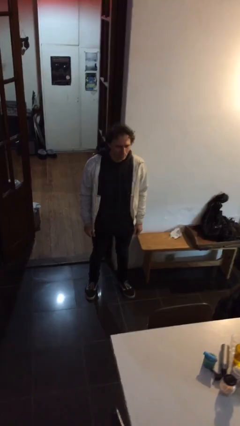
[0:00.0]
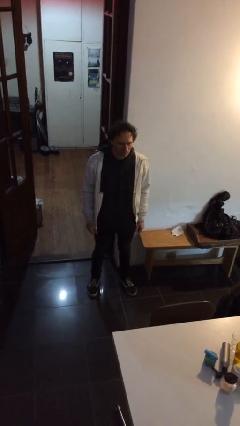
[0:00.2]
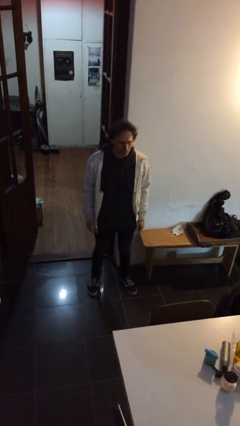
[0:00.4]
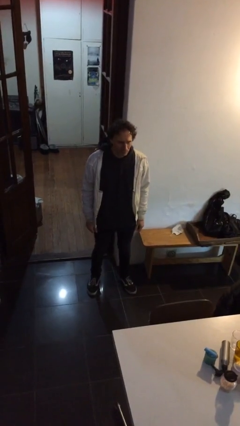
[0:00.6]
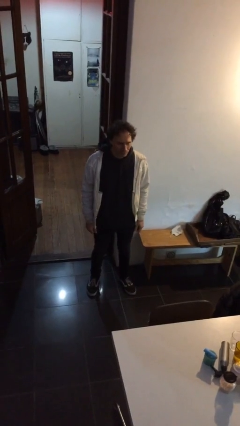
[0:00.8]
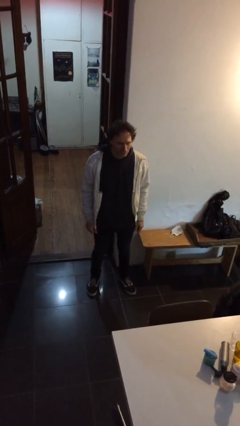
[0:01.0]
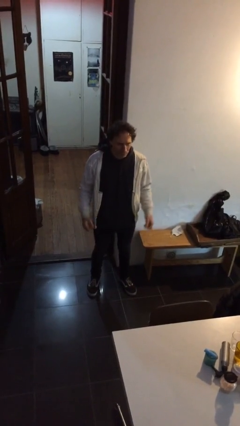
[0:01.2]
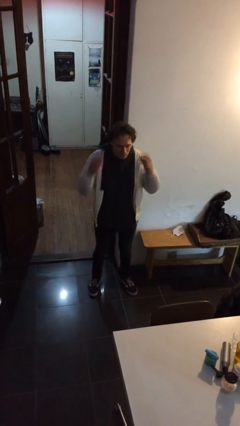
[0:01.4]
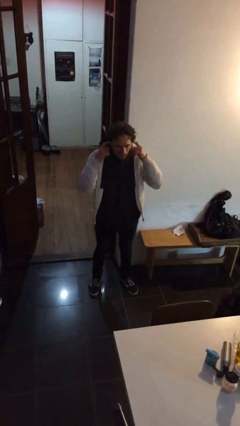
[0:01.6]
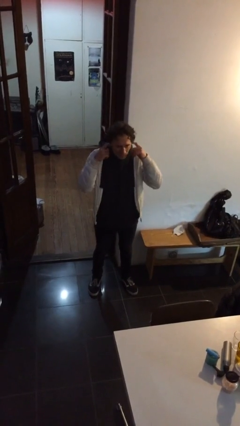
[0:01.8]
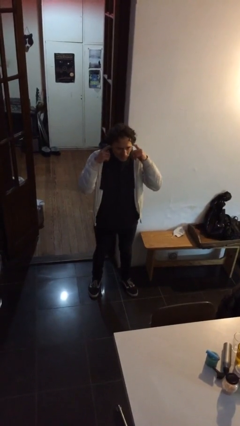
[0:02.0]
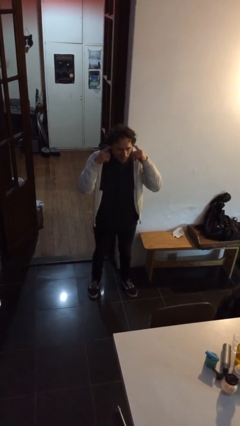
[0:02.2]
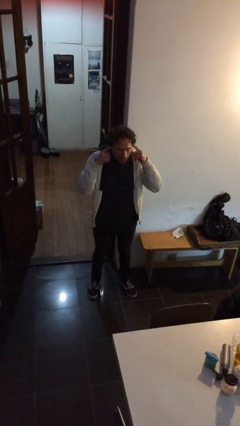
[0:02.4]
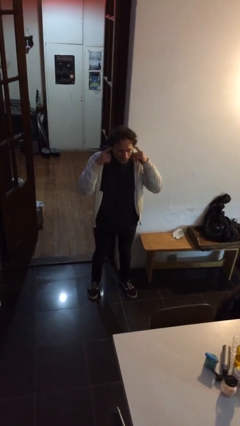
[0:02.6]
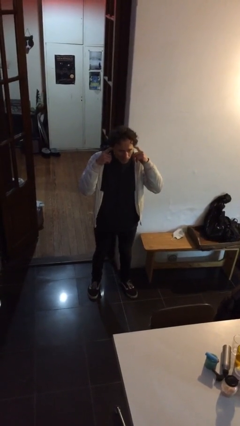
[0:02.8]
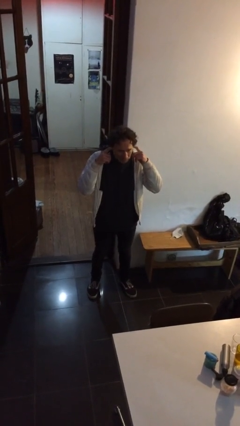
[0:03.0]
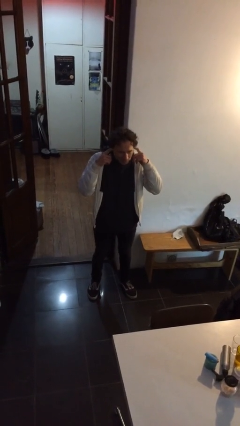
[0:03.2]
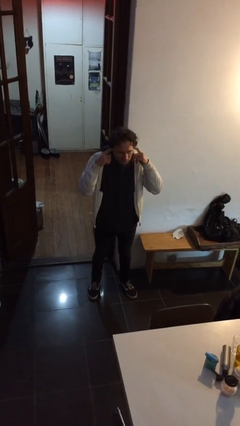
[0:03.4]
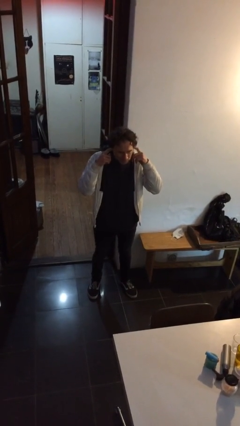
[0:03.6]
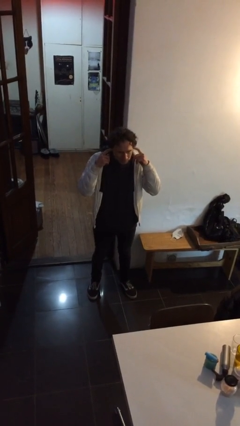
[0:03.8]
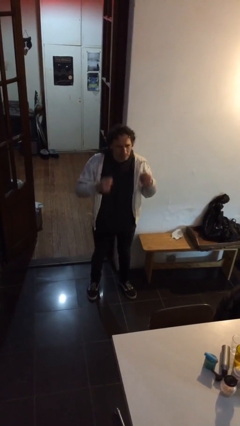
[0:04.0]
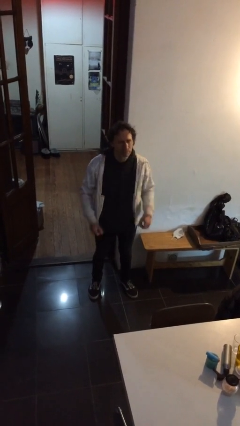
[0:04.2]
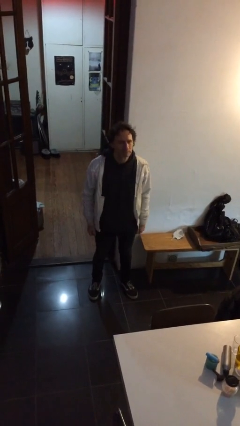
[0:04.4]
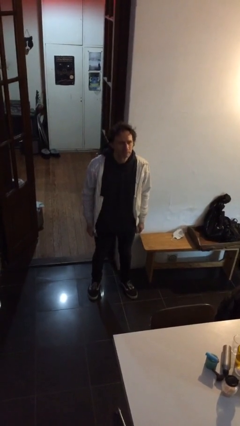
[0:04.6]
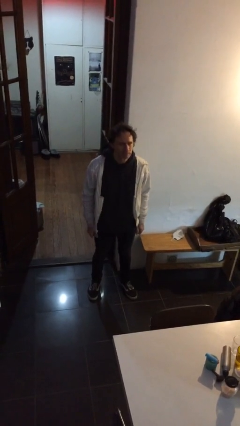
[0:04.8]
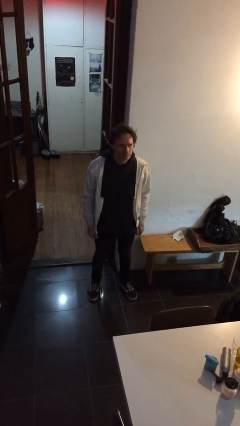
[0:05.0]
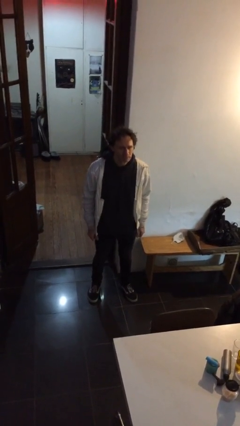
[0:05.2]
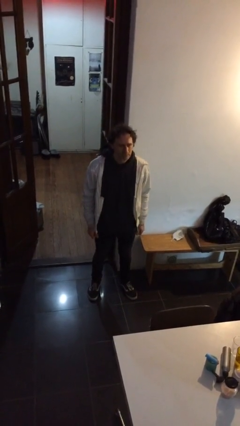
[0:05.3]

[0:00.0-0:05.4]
person puts fingers in ear

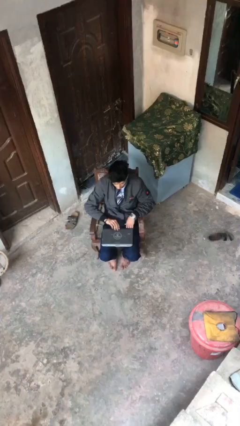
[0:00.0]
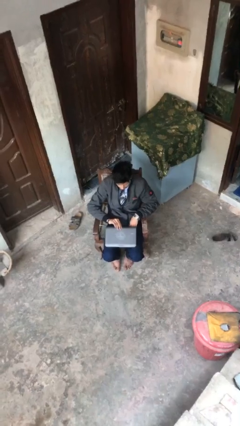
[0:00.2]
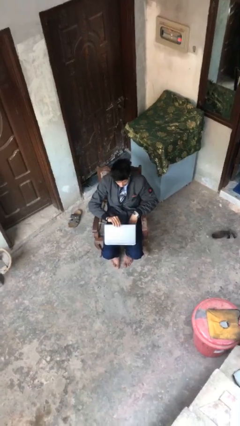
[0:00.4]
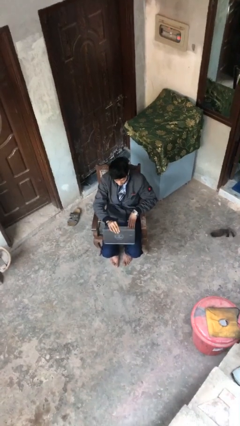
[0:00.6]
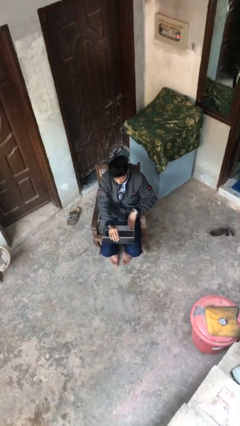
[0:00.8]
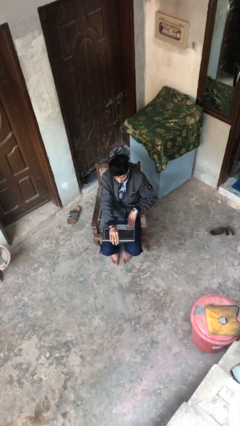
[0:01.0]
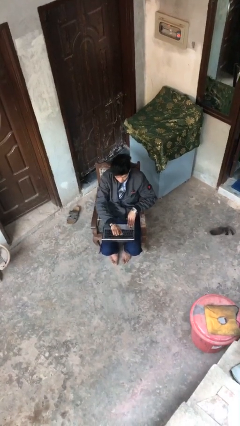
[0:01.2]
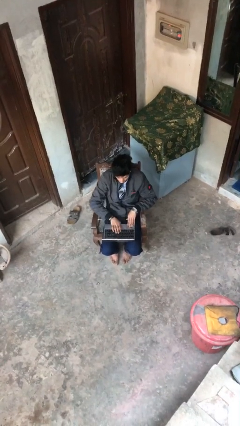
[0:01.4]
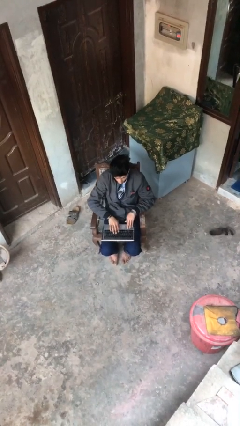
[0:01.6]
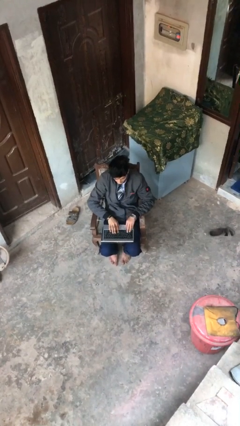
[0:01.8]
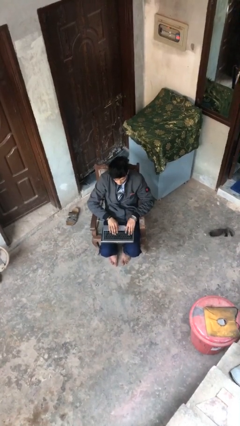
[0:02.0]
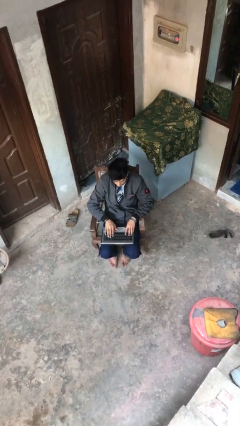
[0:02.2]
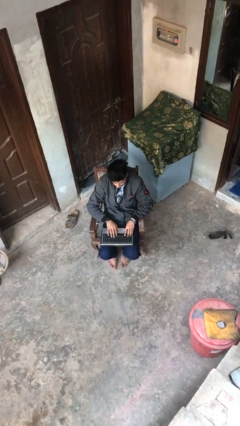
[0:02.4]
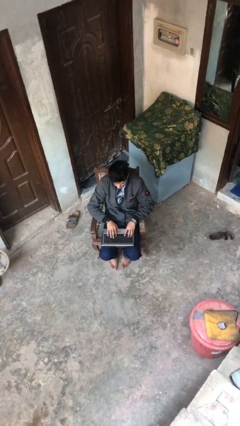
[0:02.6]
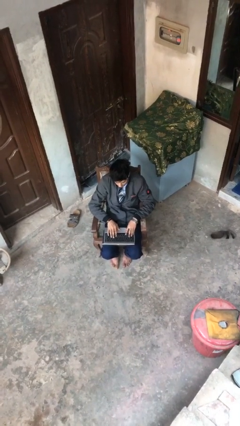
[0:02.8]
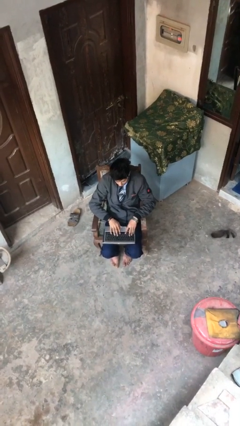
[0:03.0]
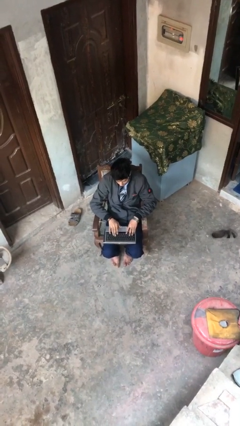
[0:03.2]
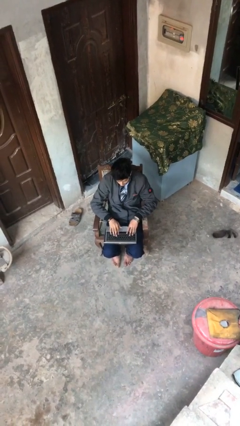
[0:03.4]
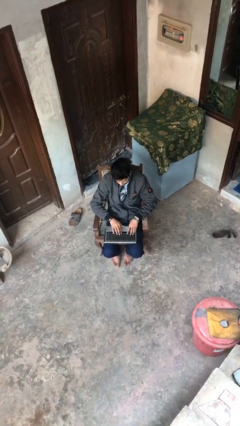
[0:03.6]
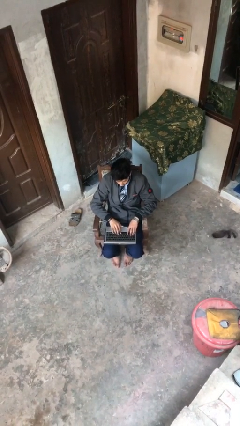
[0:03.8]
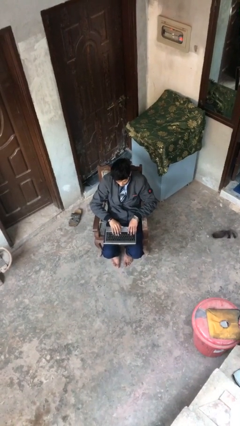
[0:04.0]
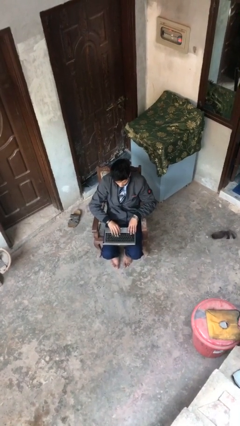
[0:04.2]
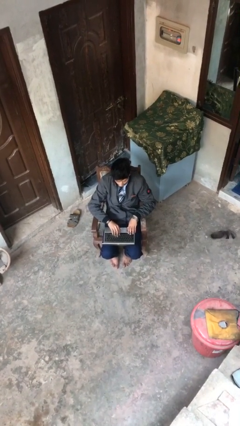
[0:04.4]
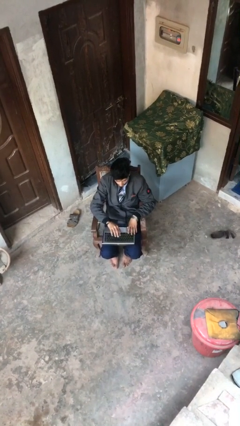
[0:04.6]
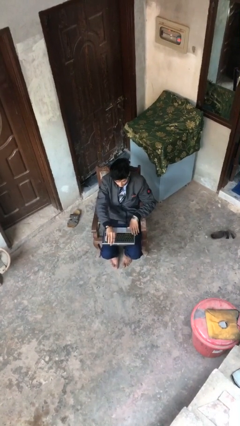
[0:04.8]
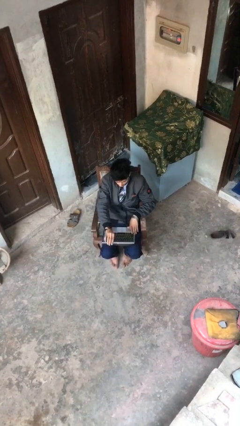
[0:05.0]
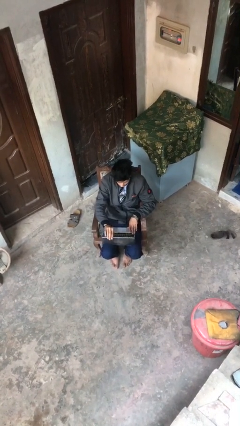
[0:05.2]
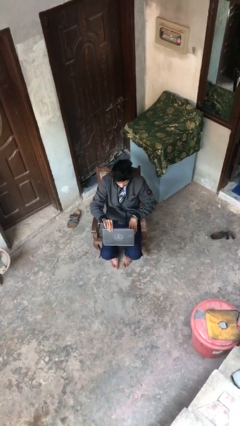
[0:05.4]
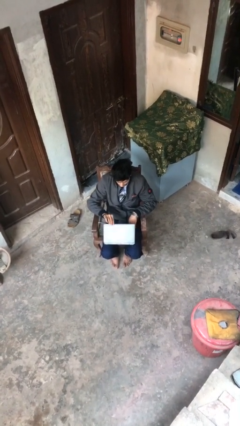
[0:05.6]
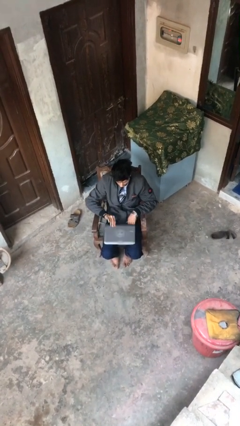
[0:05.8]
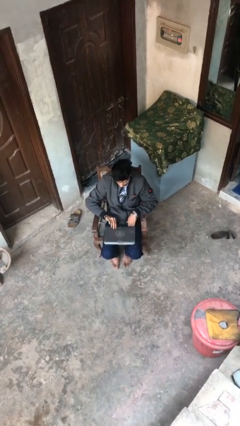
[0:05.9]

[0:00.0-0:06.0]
person interacts with laptop

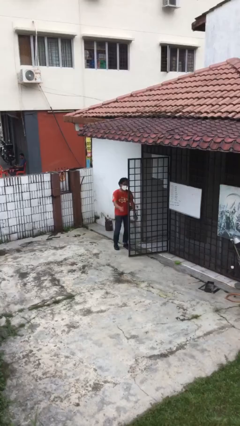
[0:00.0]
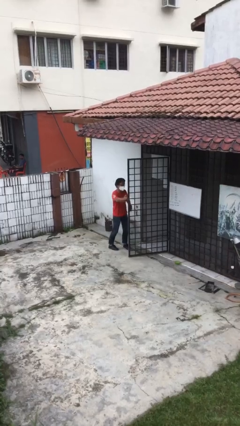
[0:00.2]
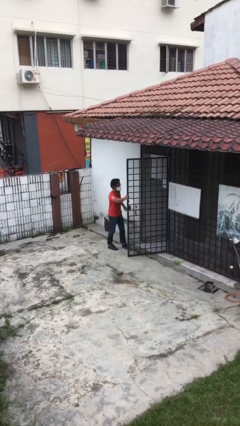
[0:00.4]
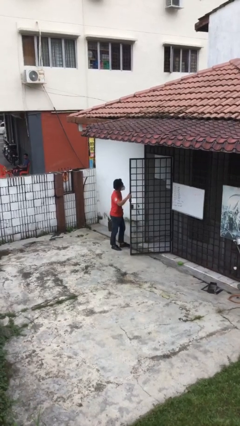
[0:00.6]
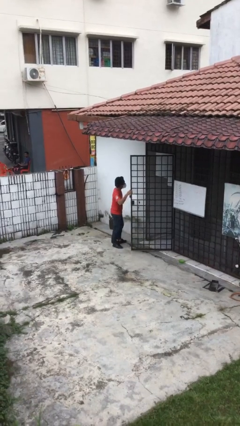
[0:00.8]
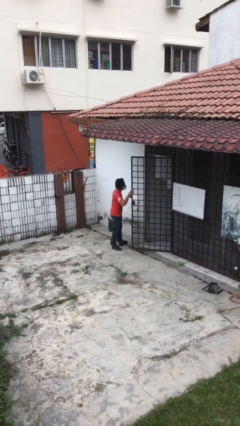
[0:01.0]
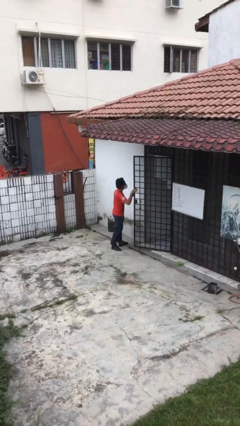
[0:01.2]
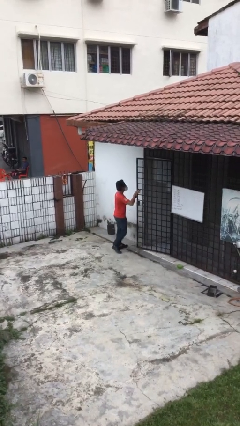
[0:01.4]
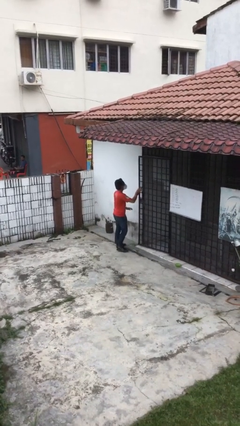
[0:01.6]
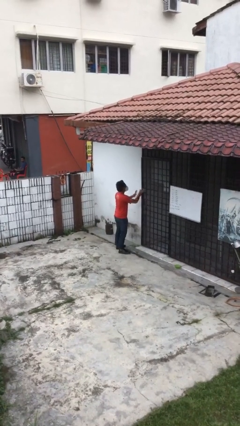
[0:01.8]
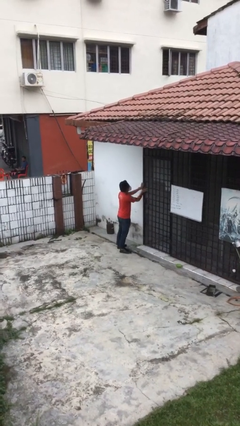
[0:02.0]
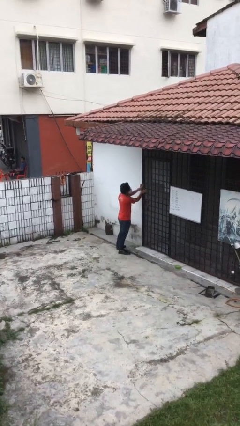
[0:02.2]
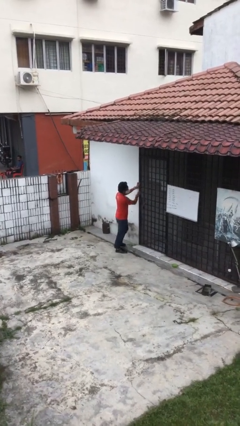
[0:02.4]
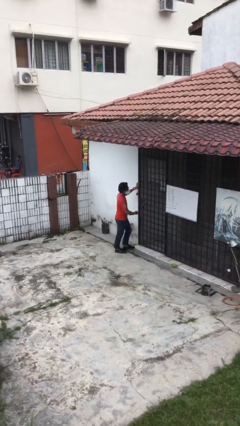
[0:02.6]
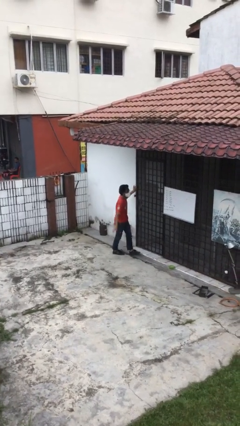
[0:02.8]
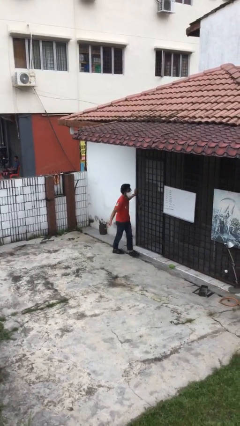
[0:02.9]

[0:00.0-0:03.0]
person closes facility door

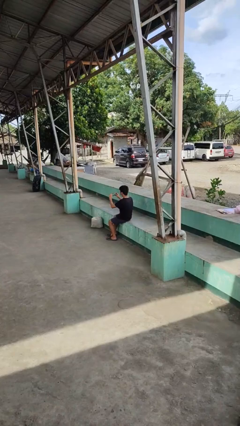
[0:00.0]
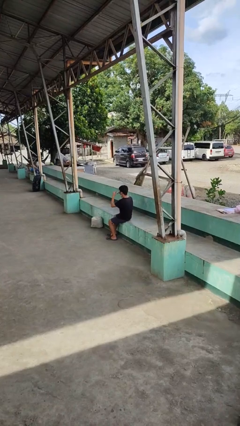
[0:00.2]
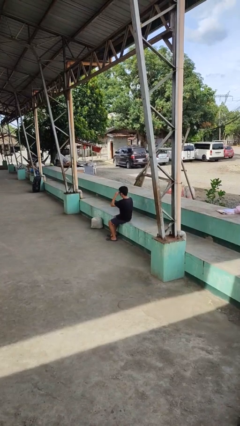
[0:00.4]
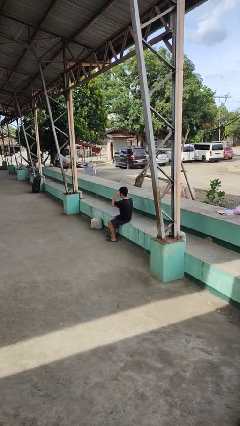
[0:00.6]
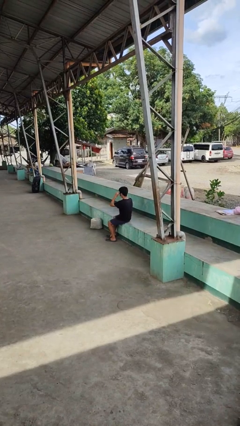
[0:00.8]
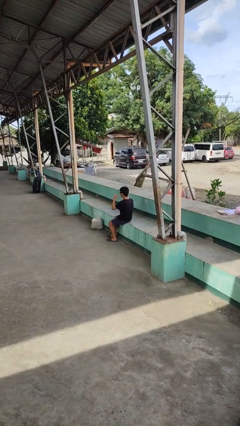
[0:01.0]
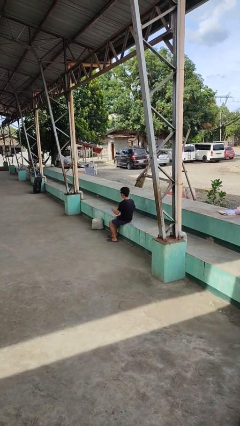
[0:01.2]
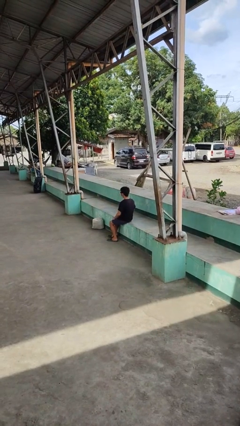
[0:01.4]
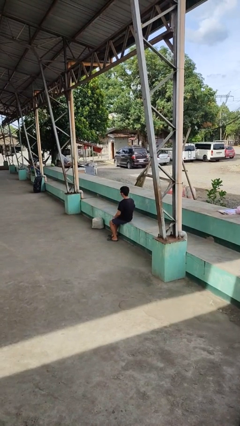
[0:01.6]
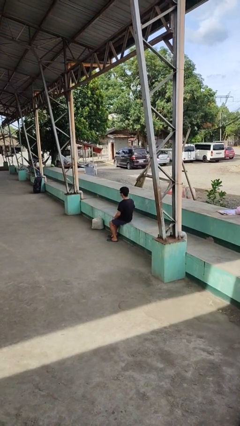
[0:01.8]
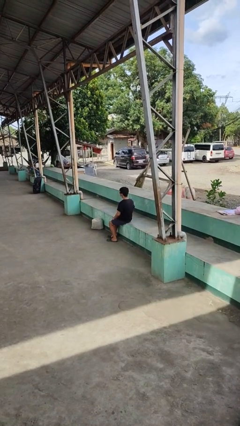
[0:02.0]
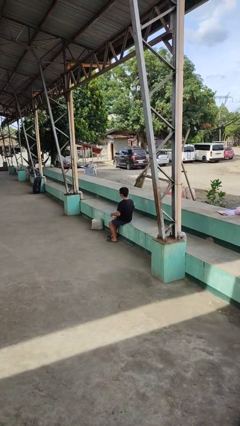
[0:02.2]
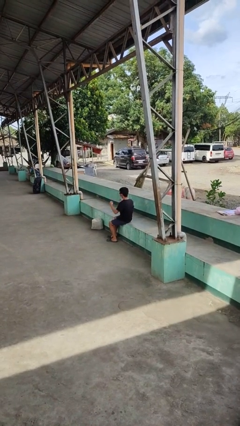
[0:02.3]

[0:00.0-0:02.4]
person puts on sunglasses

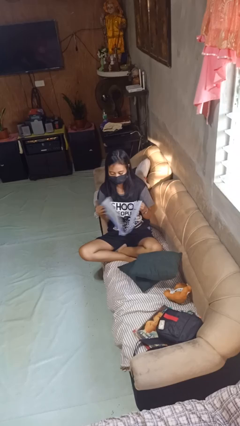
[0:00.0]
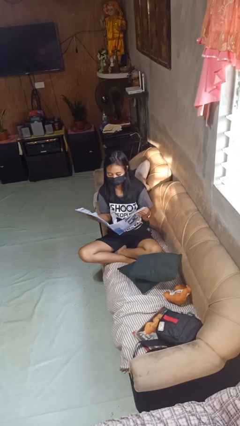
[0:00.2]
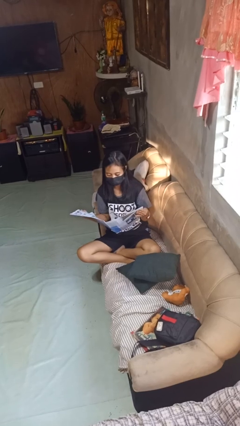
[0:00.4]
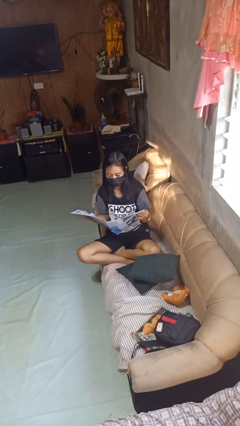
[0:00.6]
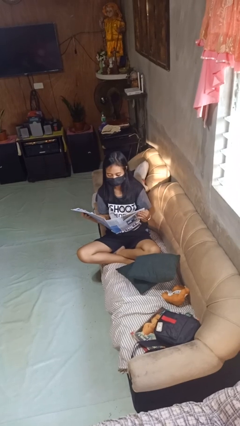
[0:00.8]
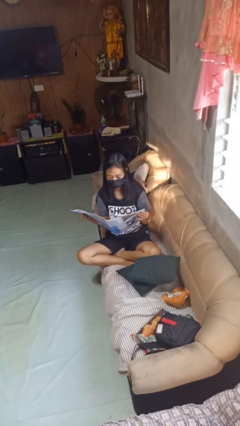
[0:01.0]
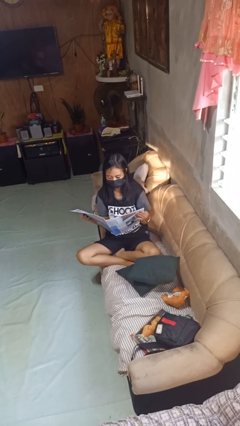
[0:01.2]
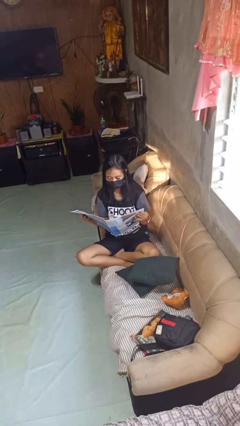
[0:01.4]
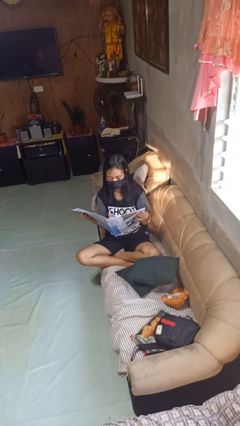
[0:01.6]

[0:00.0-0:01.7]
person reads newspaper
